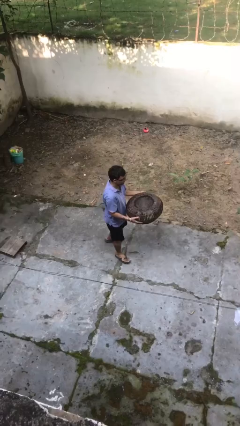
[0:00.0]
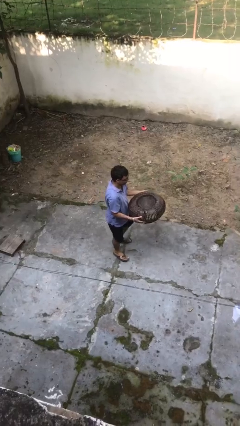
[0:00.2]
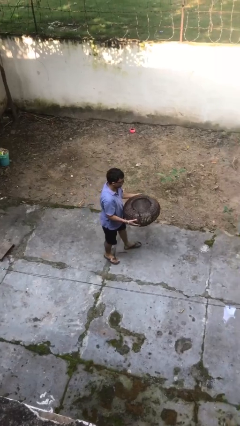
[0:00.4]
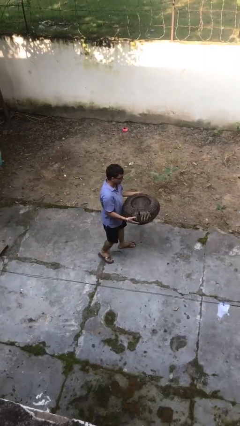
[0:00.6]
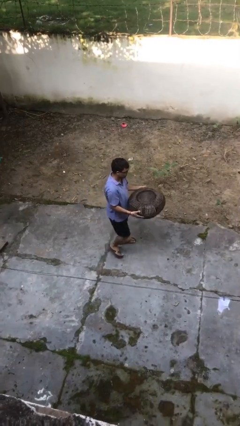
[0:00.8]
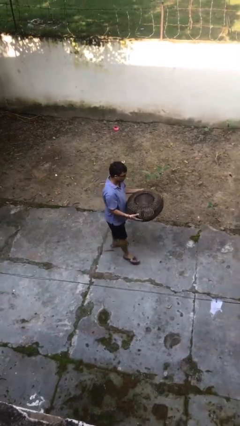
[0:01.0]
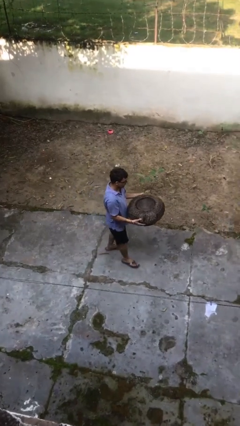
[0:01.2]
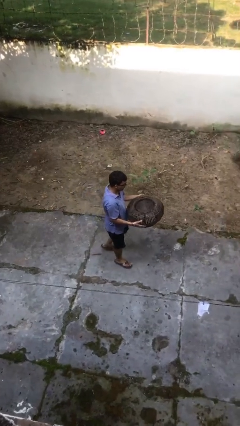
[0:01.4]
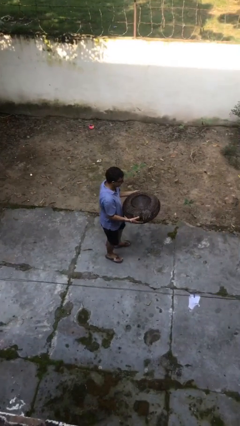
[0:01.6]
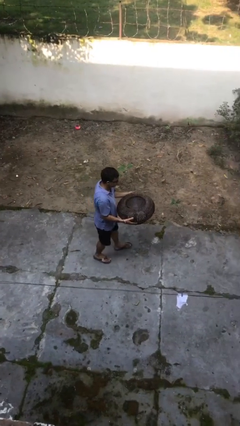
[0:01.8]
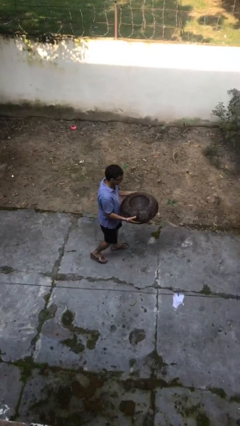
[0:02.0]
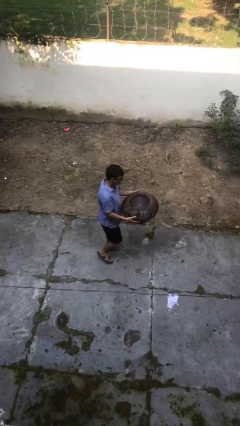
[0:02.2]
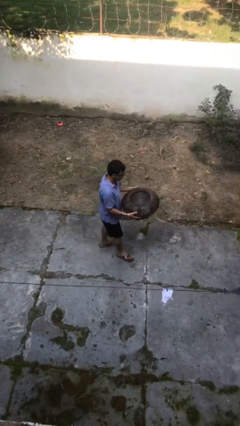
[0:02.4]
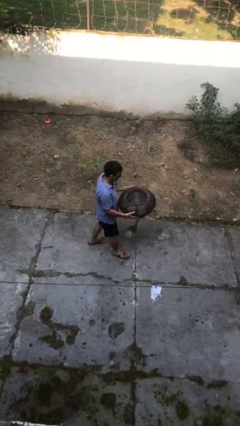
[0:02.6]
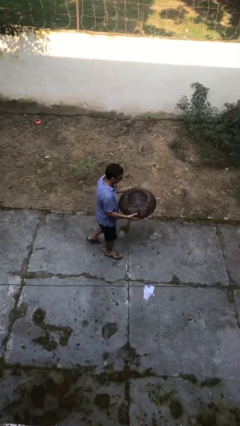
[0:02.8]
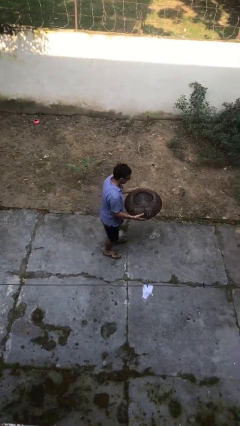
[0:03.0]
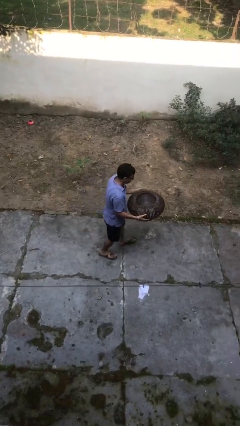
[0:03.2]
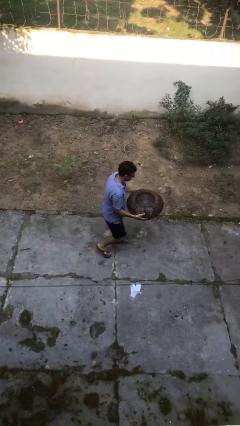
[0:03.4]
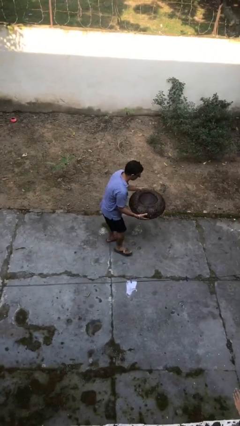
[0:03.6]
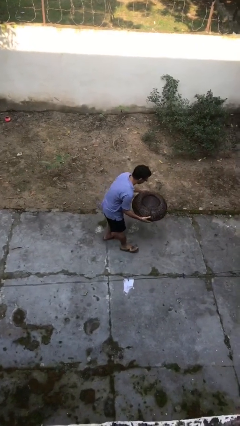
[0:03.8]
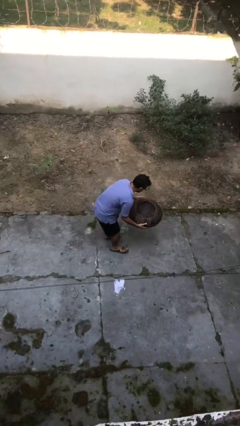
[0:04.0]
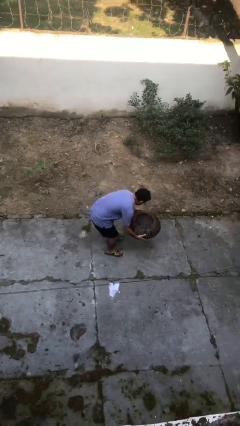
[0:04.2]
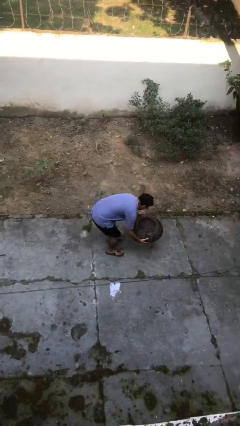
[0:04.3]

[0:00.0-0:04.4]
person carries heavy object

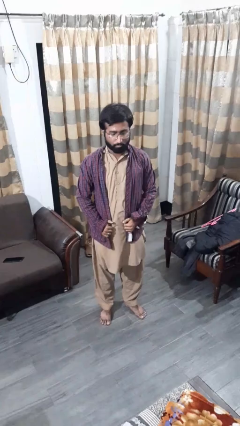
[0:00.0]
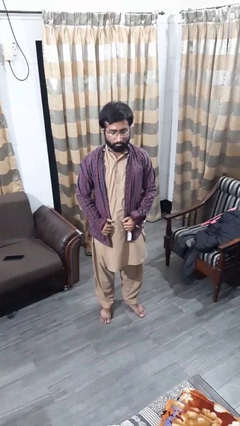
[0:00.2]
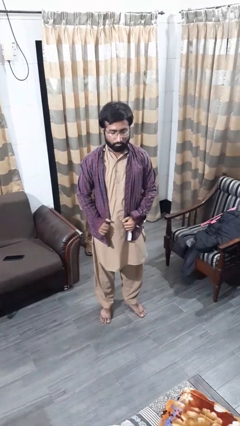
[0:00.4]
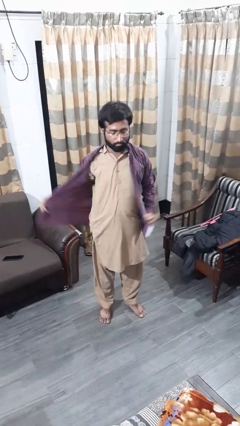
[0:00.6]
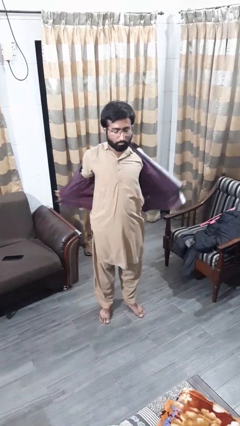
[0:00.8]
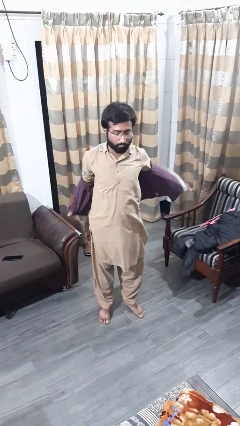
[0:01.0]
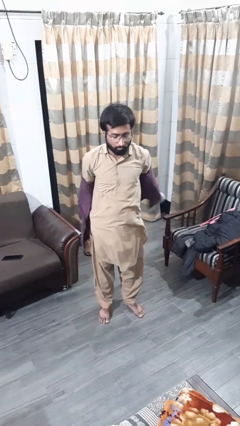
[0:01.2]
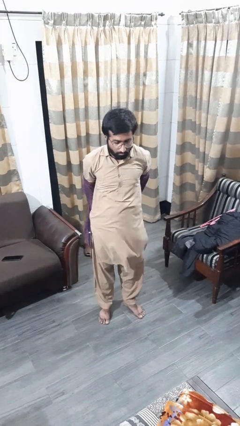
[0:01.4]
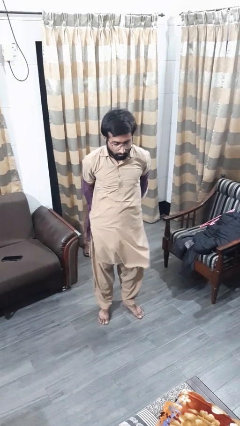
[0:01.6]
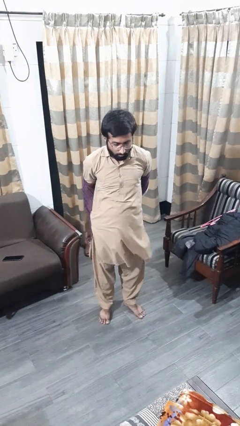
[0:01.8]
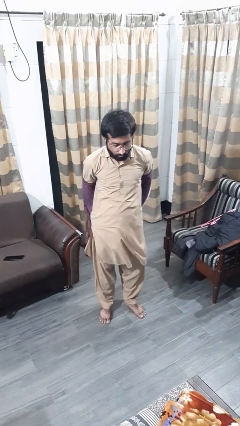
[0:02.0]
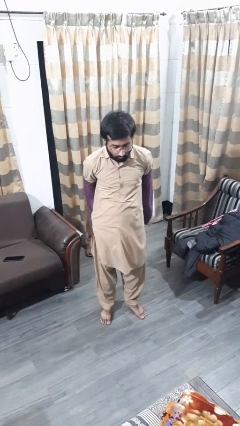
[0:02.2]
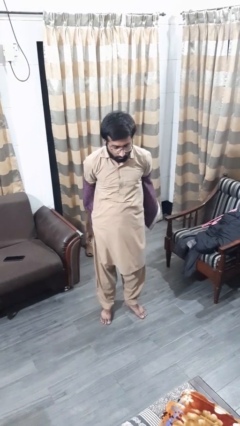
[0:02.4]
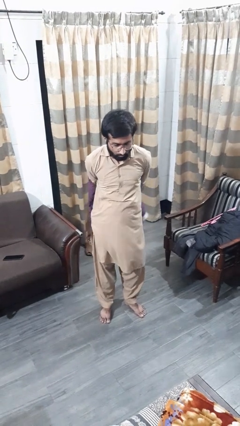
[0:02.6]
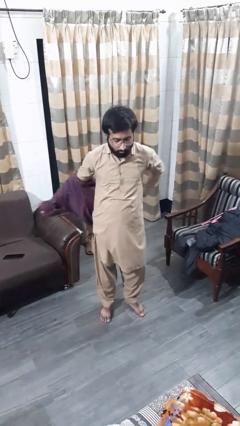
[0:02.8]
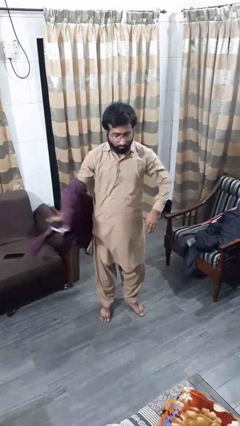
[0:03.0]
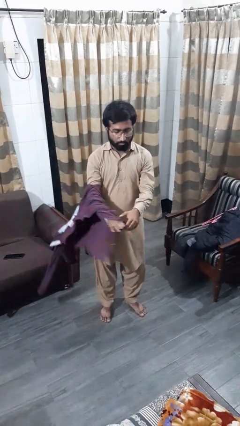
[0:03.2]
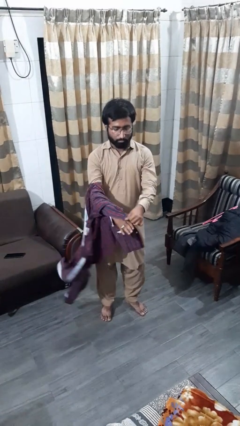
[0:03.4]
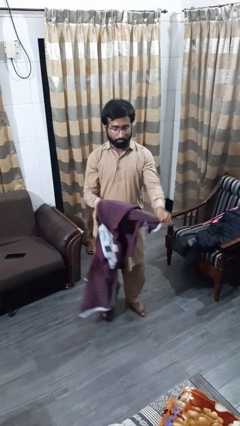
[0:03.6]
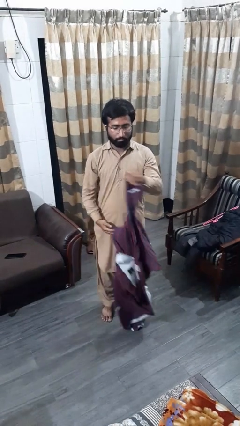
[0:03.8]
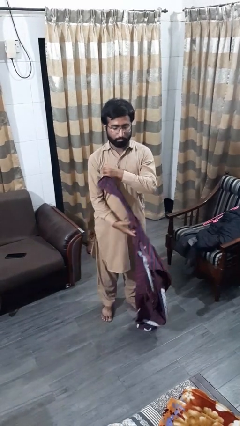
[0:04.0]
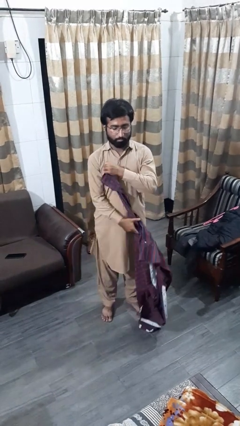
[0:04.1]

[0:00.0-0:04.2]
person takes off shirt

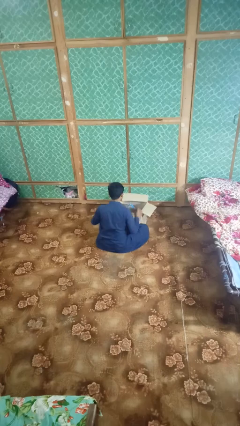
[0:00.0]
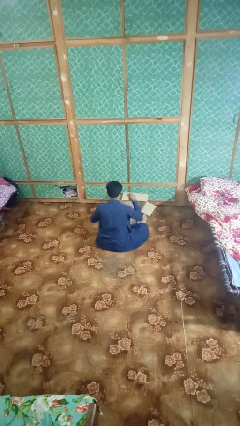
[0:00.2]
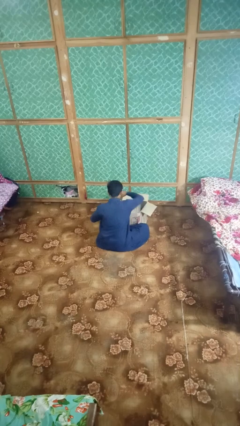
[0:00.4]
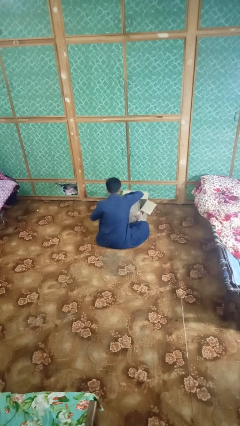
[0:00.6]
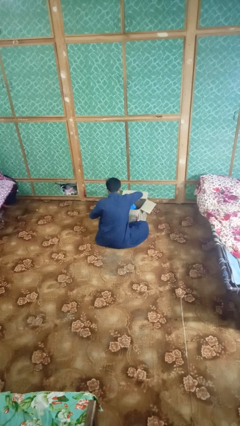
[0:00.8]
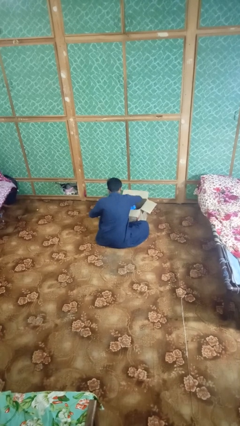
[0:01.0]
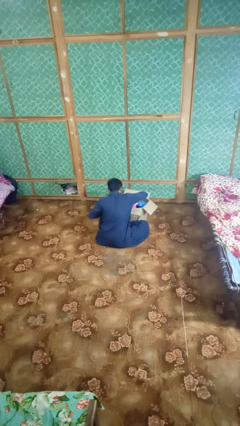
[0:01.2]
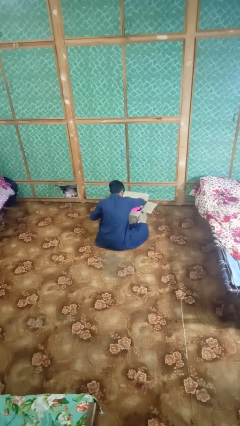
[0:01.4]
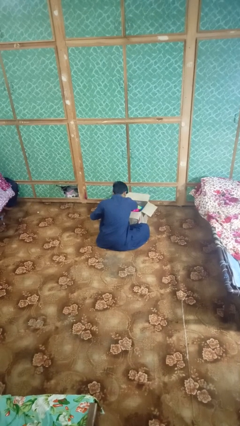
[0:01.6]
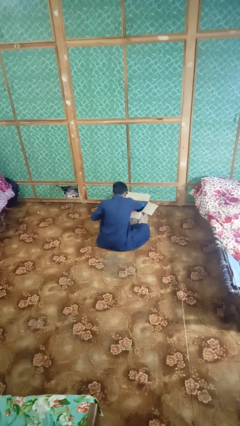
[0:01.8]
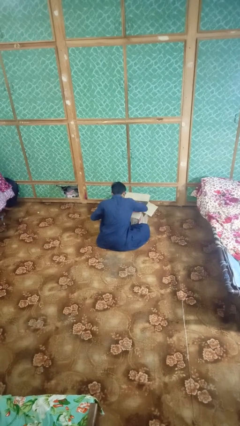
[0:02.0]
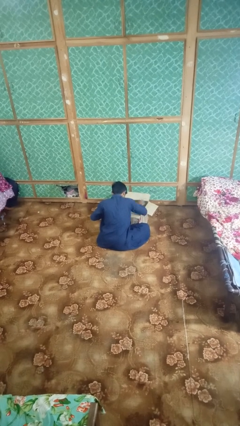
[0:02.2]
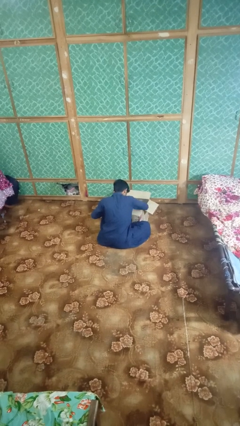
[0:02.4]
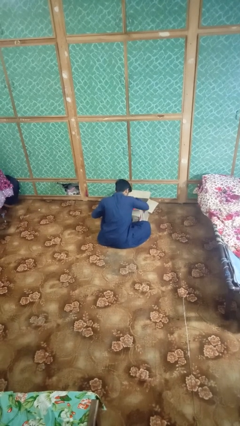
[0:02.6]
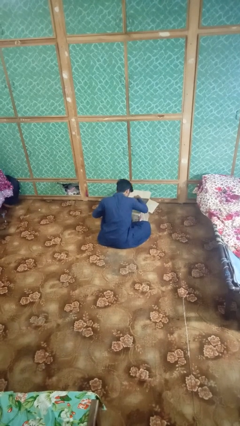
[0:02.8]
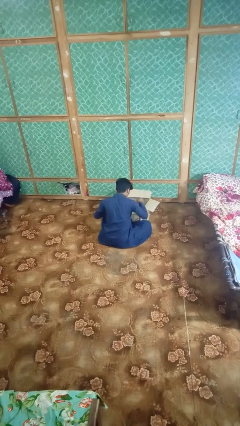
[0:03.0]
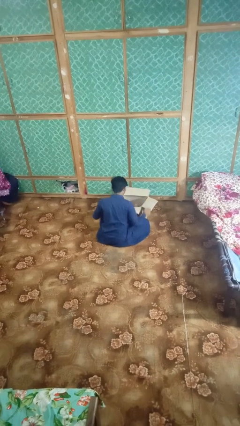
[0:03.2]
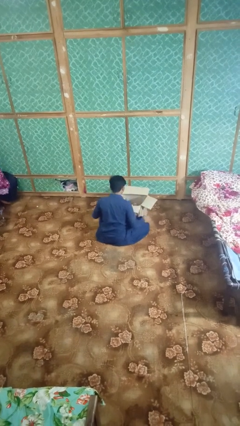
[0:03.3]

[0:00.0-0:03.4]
person searches in box

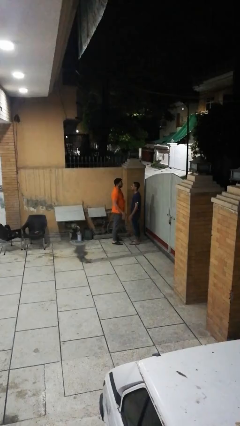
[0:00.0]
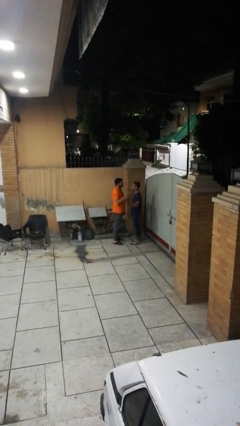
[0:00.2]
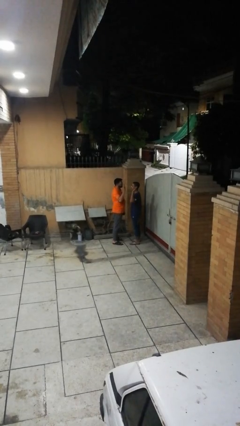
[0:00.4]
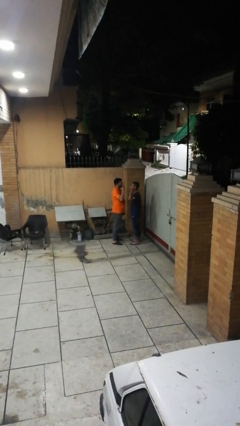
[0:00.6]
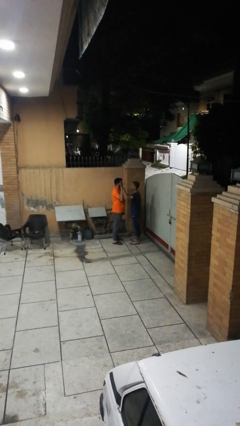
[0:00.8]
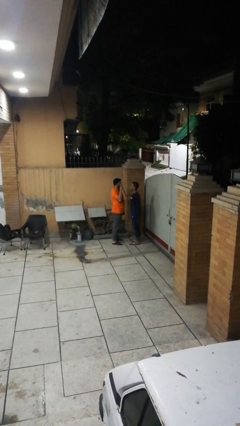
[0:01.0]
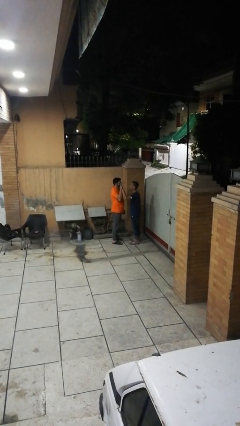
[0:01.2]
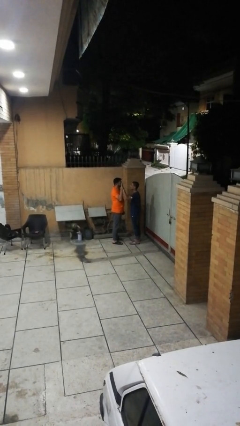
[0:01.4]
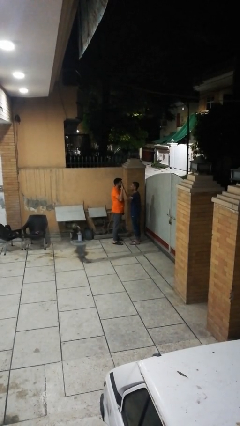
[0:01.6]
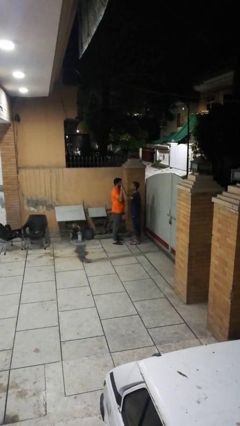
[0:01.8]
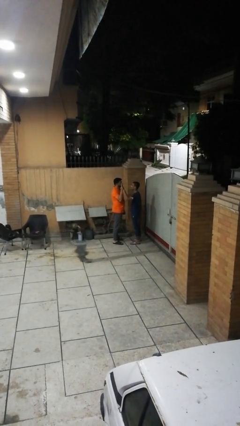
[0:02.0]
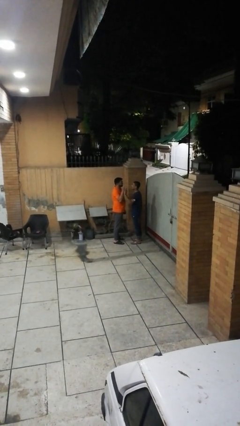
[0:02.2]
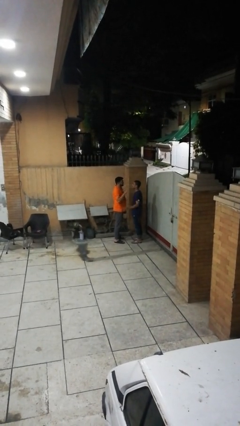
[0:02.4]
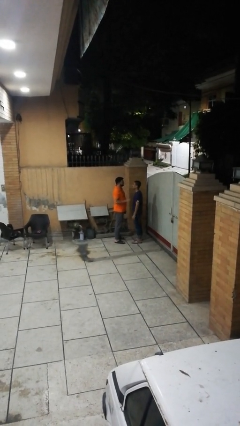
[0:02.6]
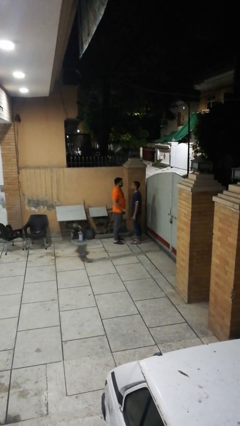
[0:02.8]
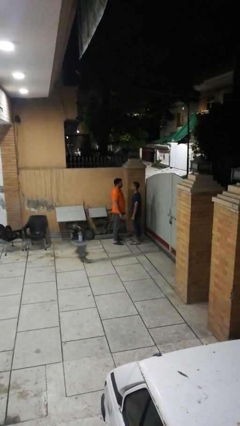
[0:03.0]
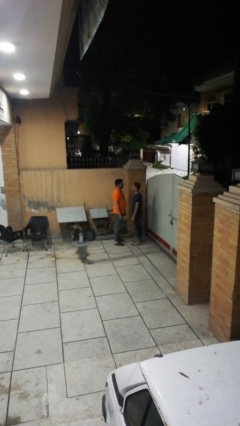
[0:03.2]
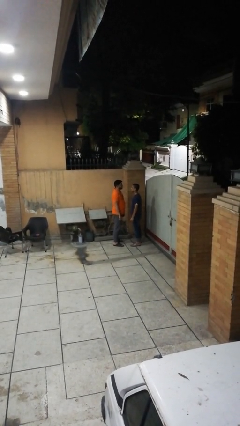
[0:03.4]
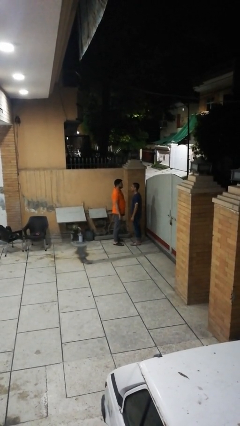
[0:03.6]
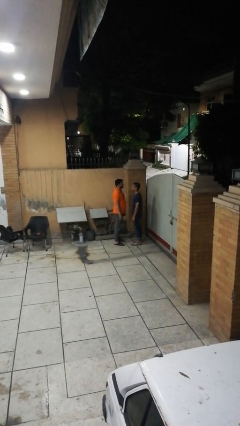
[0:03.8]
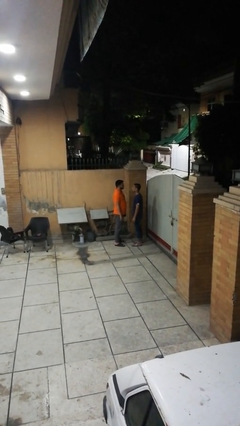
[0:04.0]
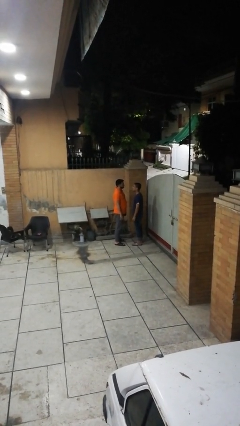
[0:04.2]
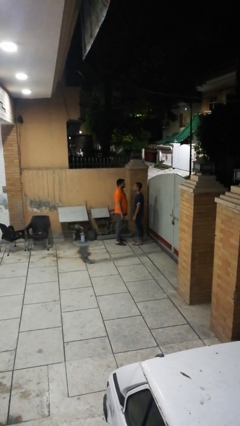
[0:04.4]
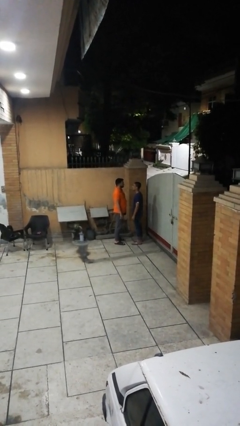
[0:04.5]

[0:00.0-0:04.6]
person highfives hand

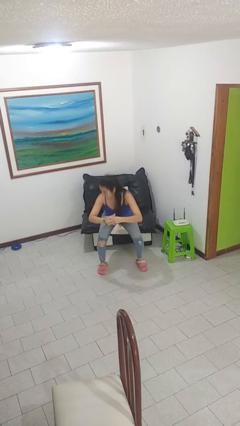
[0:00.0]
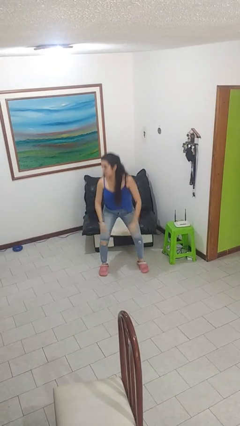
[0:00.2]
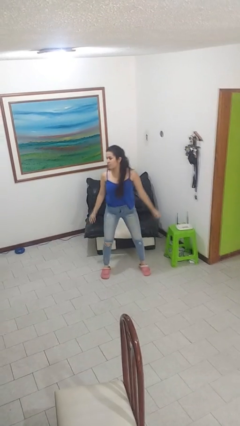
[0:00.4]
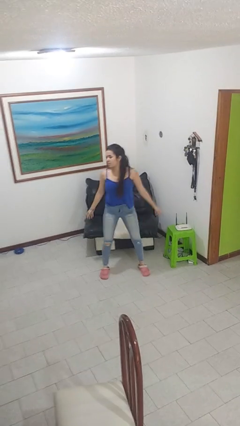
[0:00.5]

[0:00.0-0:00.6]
person stands up

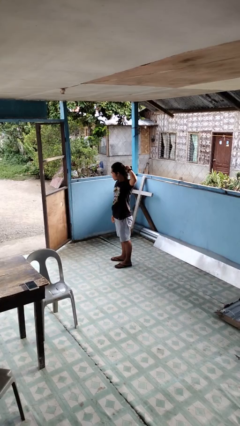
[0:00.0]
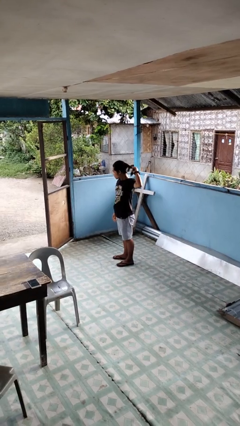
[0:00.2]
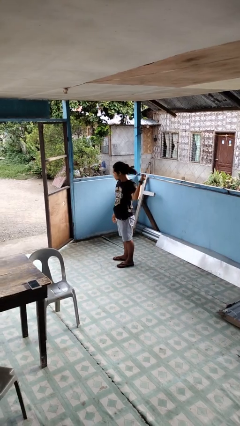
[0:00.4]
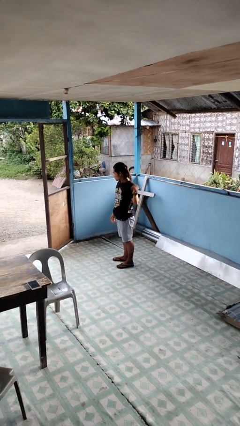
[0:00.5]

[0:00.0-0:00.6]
person takes off hairtie
